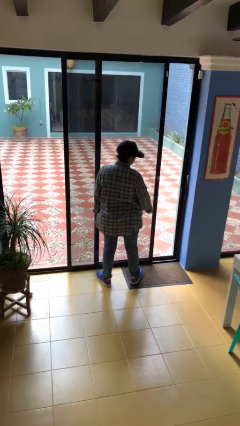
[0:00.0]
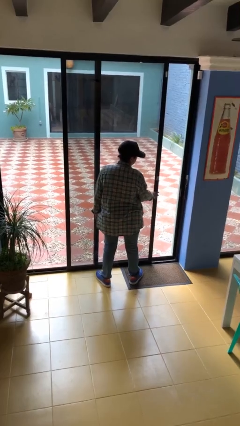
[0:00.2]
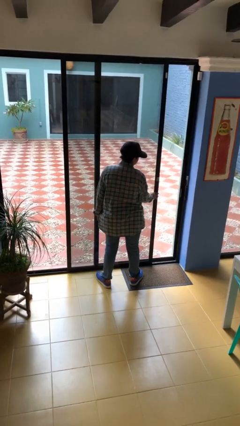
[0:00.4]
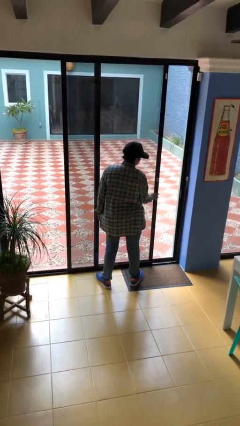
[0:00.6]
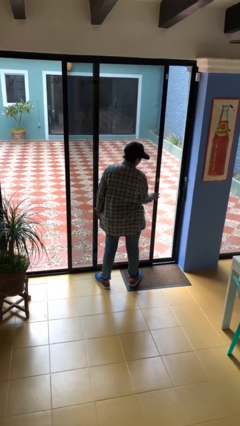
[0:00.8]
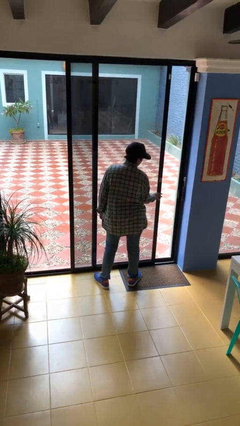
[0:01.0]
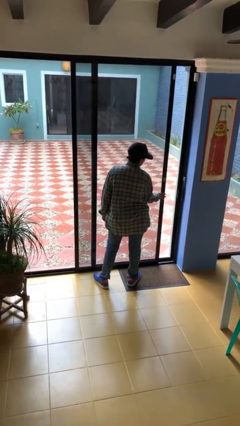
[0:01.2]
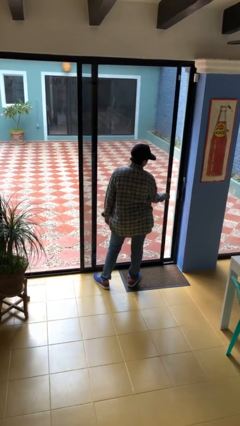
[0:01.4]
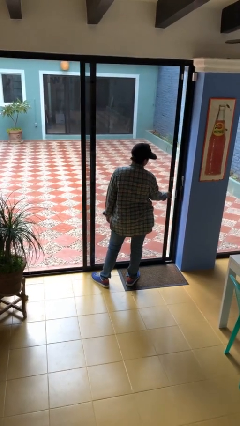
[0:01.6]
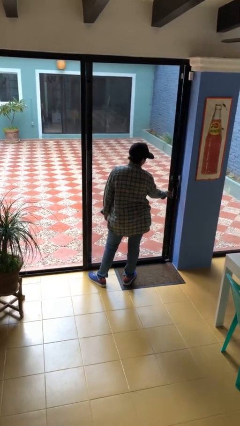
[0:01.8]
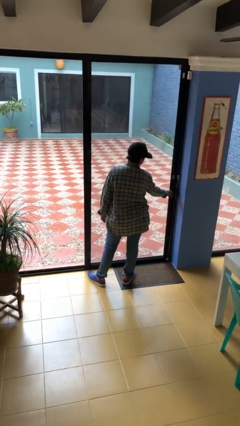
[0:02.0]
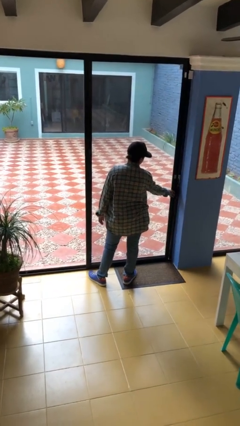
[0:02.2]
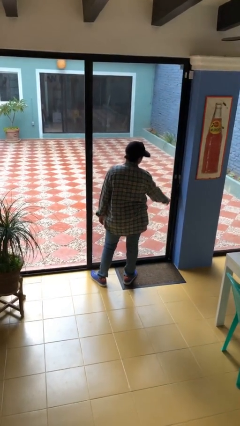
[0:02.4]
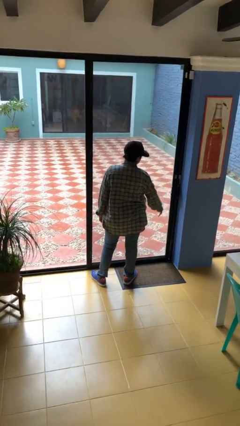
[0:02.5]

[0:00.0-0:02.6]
person closes sliding door

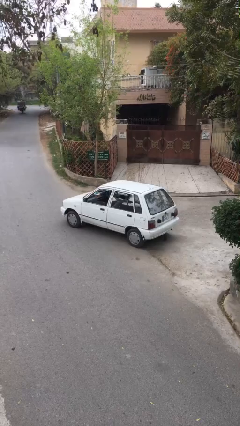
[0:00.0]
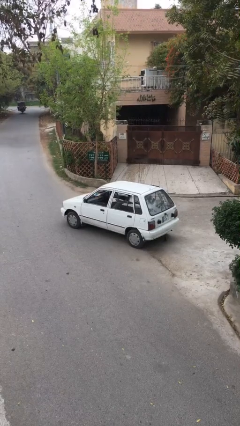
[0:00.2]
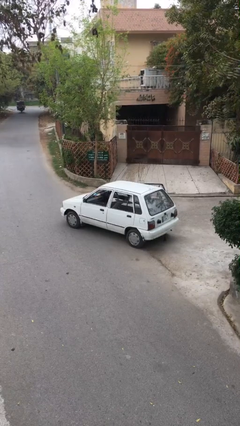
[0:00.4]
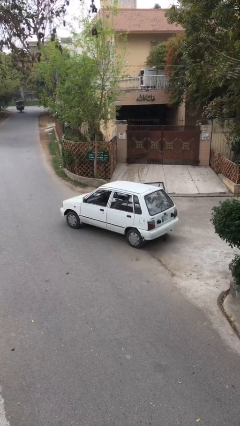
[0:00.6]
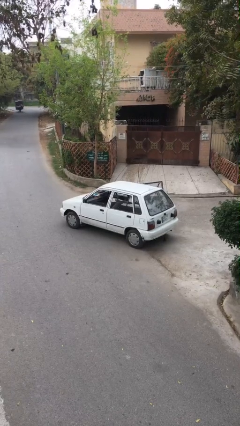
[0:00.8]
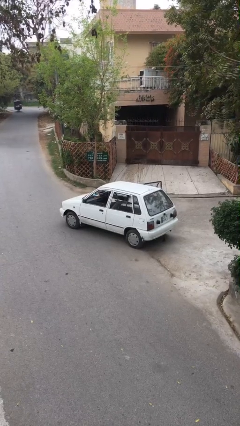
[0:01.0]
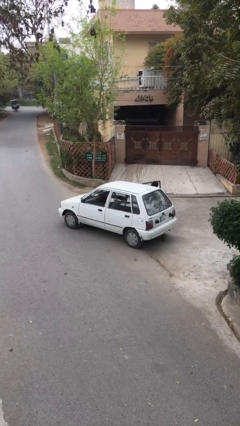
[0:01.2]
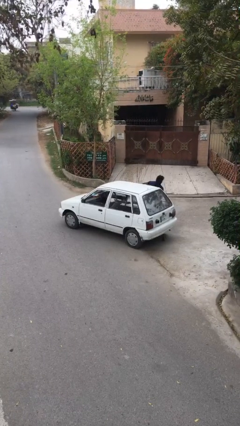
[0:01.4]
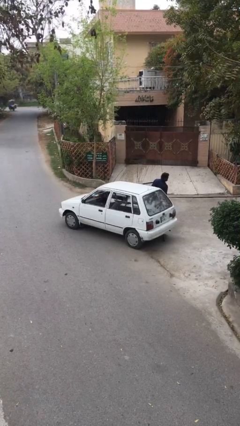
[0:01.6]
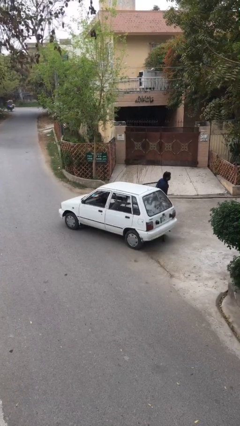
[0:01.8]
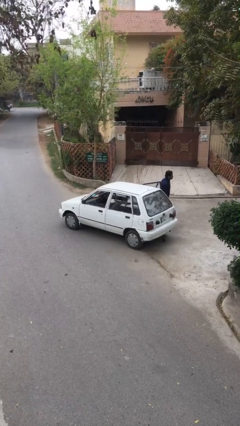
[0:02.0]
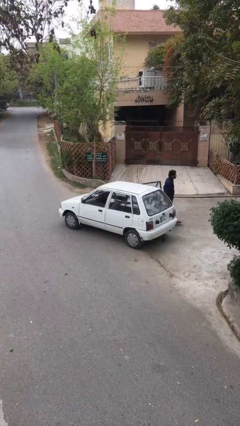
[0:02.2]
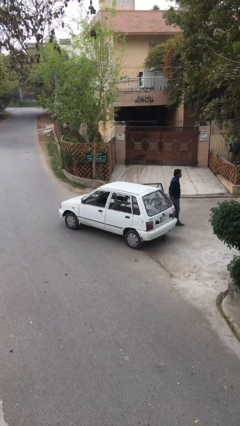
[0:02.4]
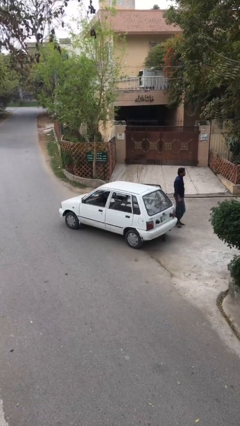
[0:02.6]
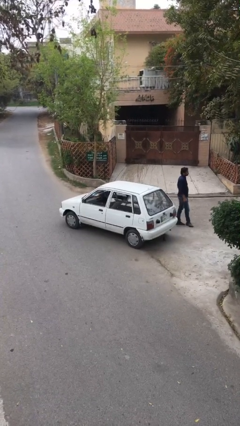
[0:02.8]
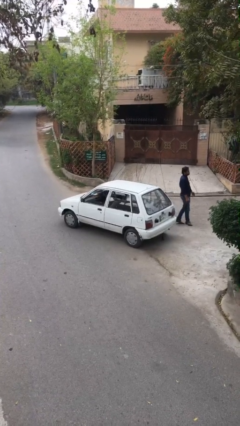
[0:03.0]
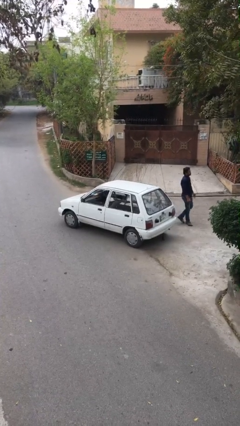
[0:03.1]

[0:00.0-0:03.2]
car drops off person

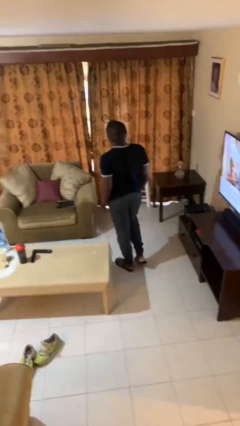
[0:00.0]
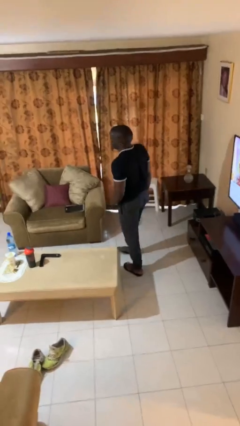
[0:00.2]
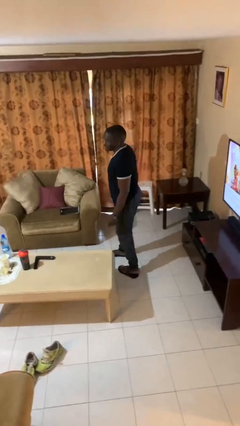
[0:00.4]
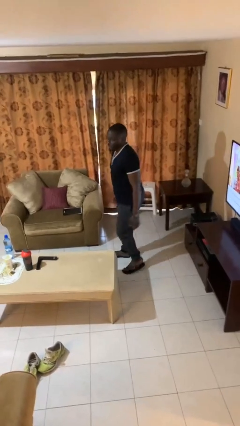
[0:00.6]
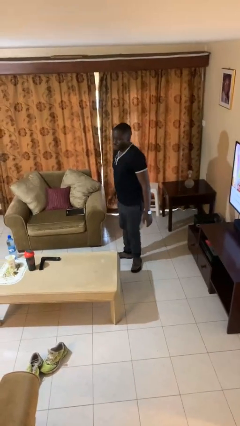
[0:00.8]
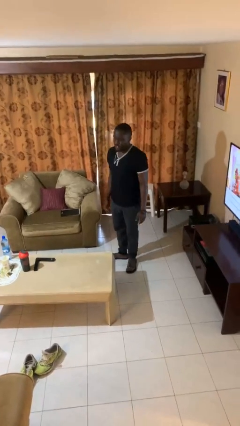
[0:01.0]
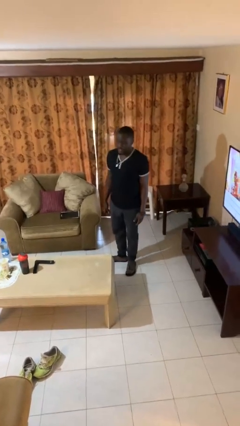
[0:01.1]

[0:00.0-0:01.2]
person bumps into table

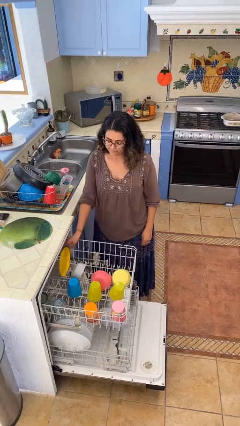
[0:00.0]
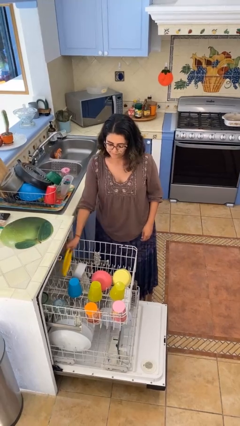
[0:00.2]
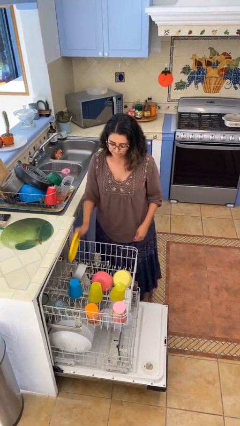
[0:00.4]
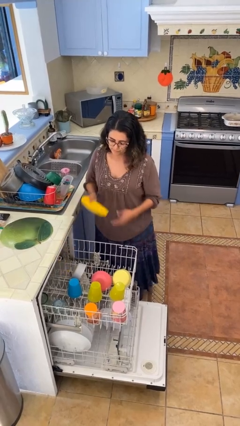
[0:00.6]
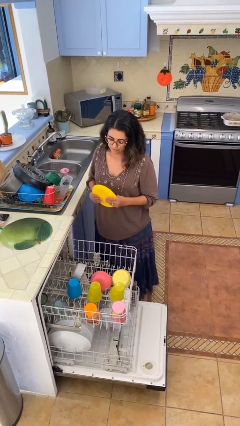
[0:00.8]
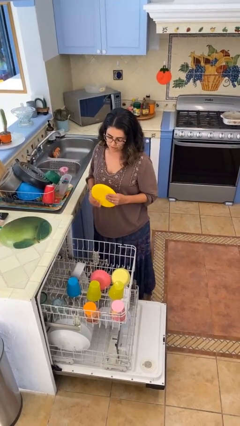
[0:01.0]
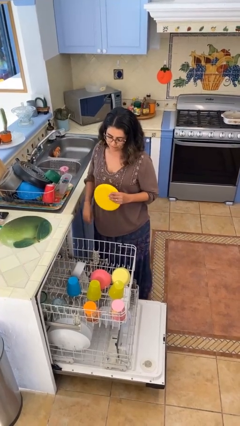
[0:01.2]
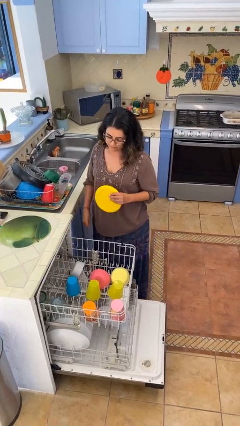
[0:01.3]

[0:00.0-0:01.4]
person unloads dishwasher

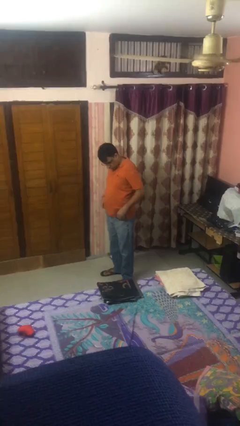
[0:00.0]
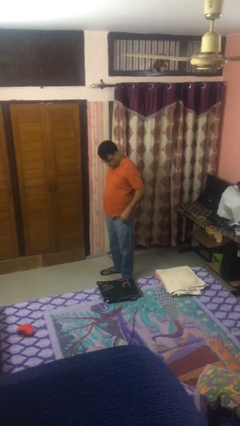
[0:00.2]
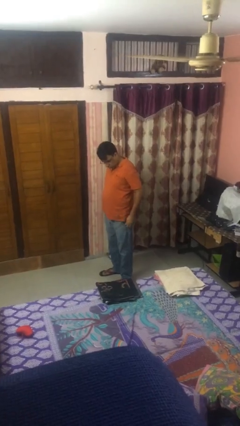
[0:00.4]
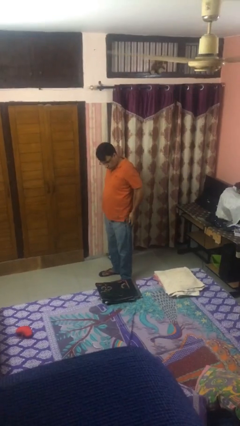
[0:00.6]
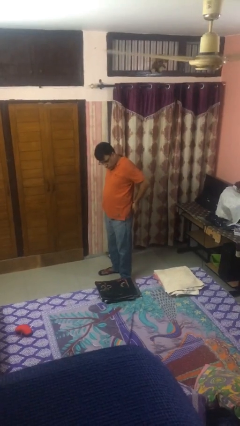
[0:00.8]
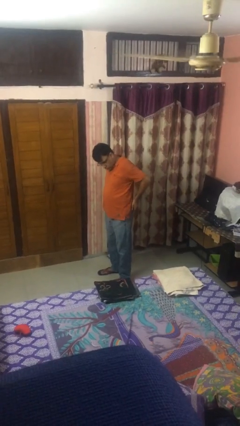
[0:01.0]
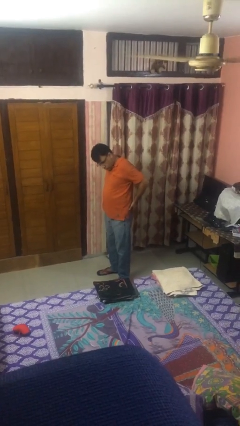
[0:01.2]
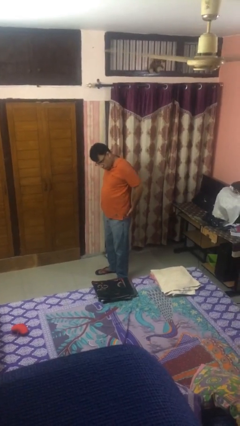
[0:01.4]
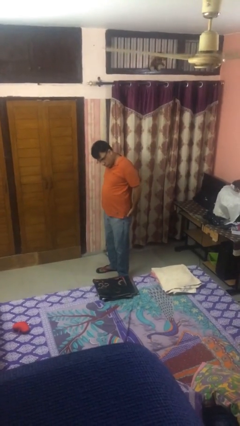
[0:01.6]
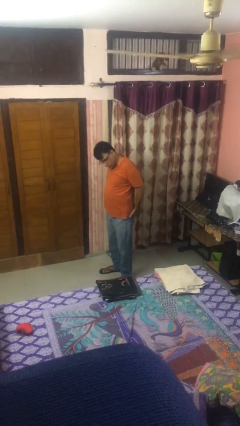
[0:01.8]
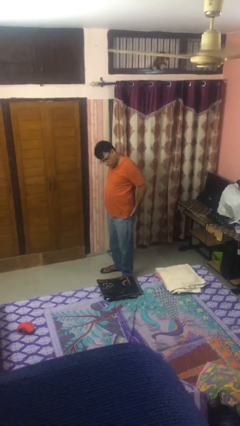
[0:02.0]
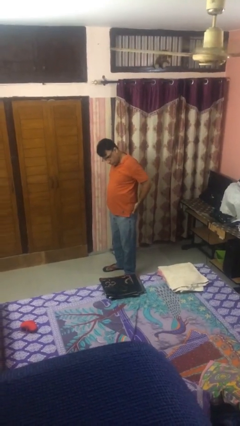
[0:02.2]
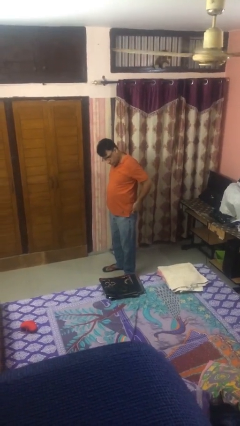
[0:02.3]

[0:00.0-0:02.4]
person puts hands in back pockets

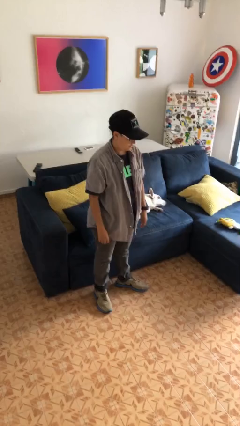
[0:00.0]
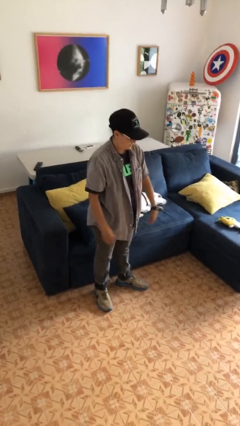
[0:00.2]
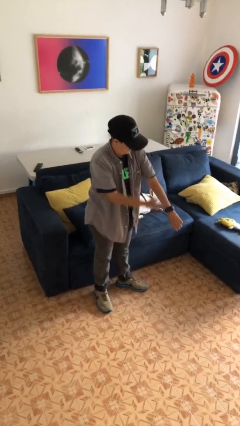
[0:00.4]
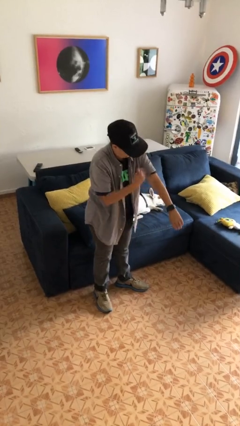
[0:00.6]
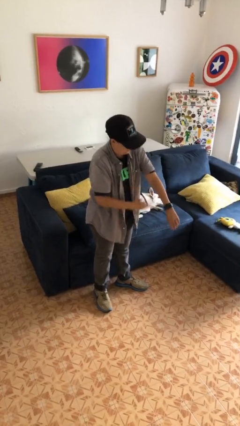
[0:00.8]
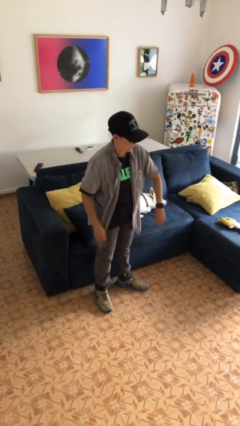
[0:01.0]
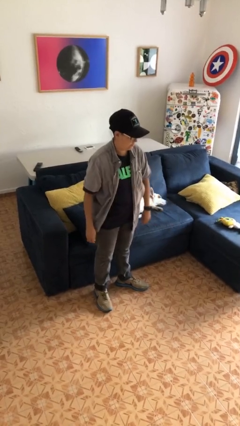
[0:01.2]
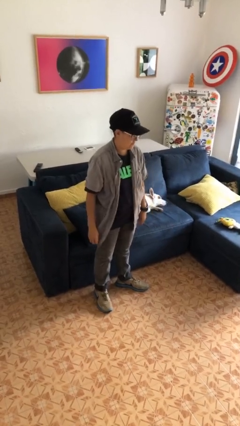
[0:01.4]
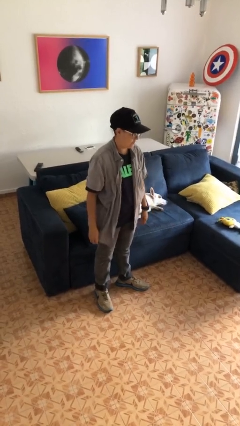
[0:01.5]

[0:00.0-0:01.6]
person swats bug

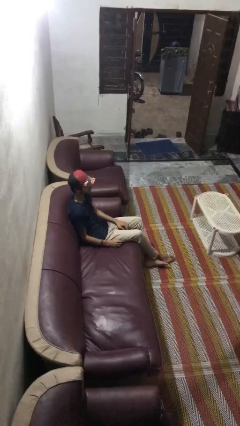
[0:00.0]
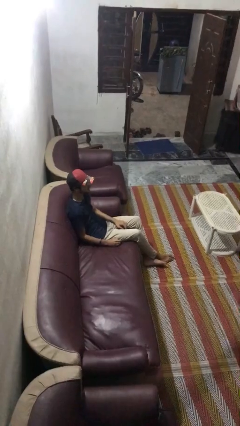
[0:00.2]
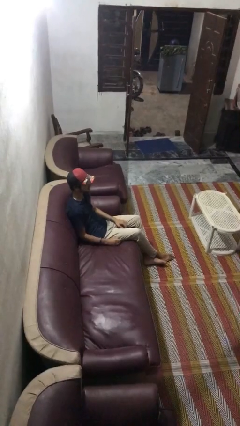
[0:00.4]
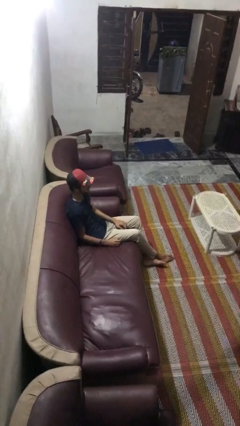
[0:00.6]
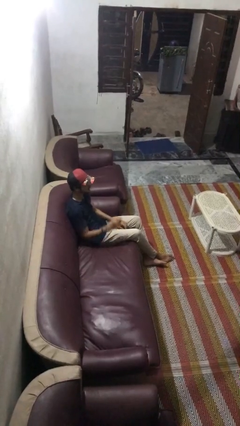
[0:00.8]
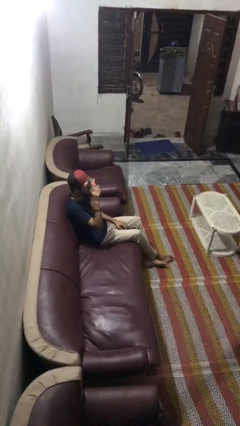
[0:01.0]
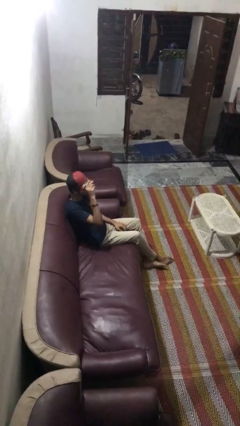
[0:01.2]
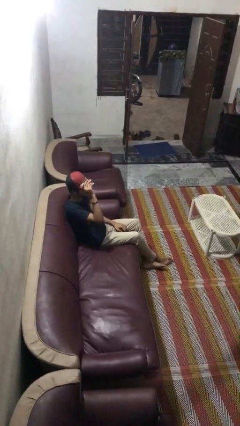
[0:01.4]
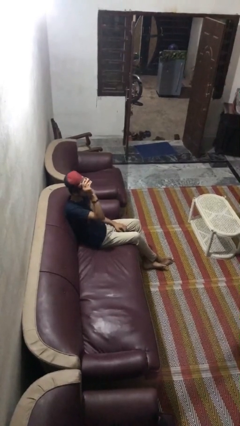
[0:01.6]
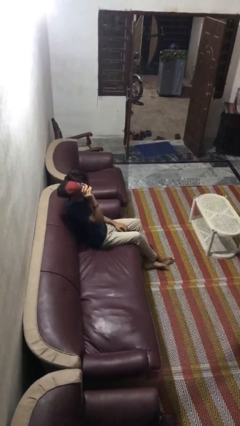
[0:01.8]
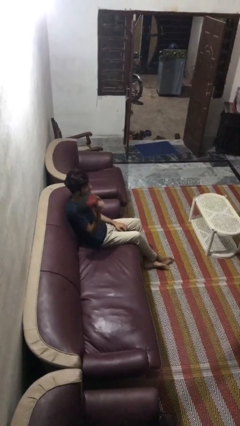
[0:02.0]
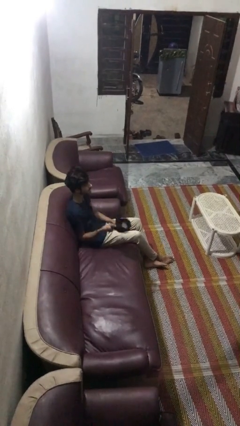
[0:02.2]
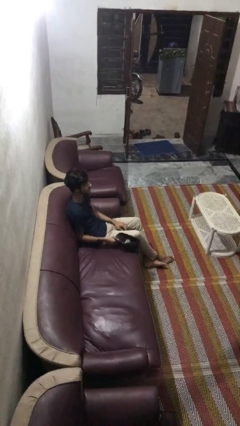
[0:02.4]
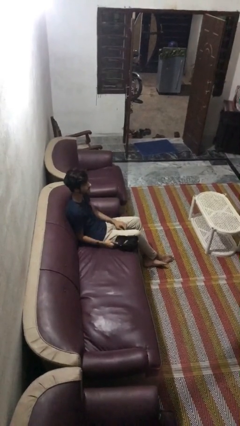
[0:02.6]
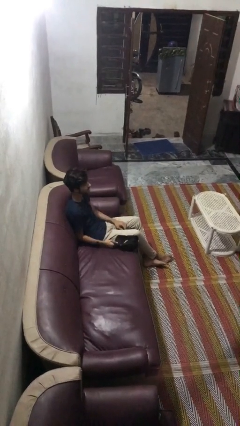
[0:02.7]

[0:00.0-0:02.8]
person takes off hat

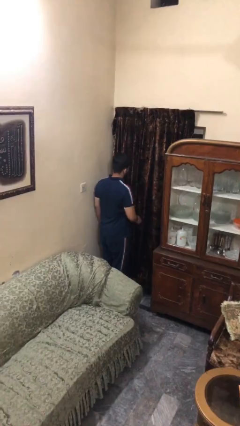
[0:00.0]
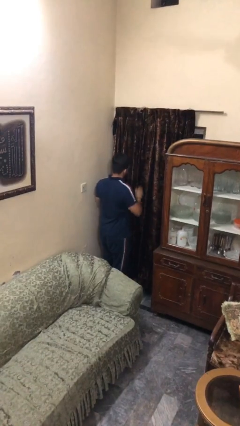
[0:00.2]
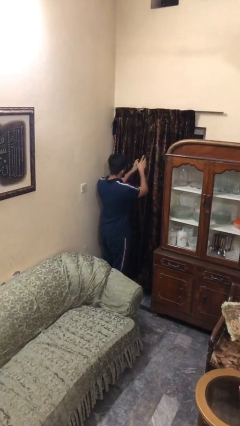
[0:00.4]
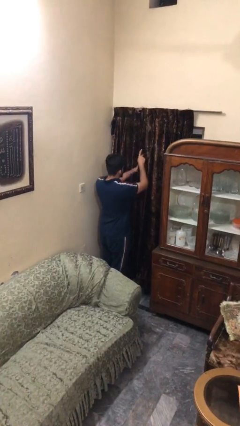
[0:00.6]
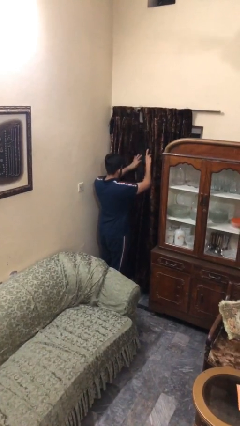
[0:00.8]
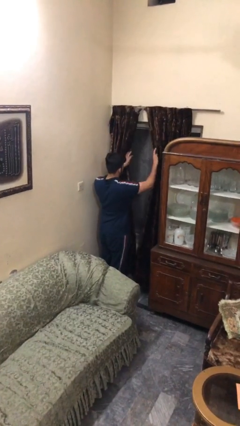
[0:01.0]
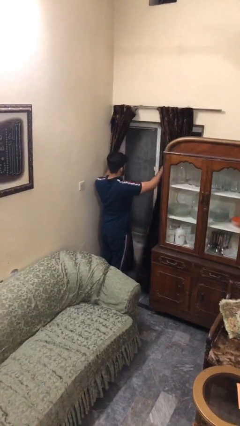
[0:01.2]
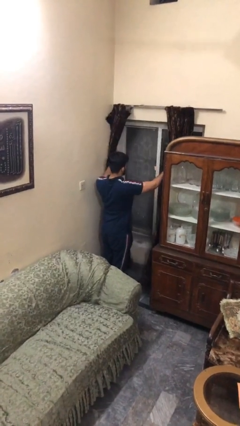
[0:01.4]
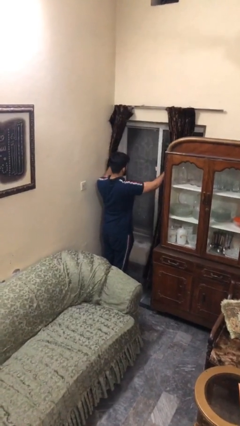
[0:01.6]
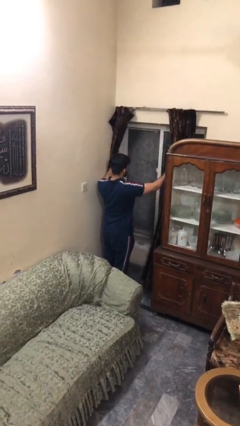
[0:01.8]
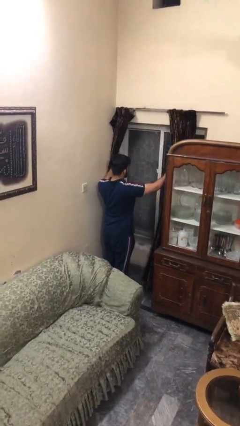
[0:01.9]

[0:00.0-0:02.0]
person opens curtains
